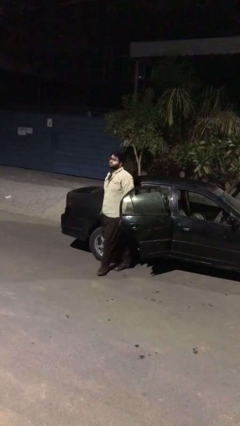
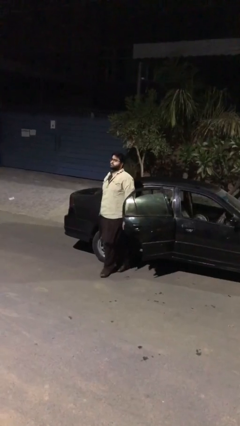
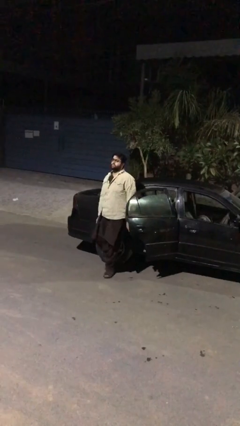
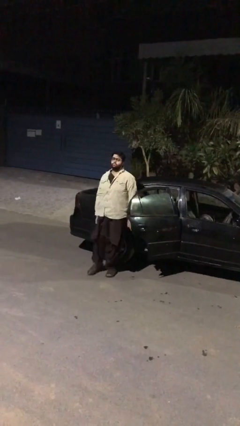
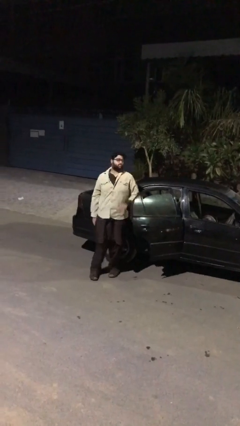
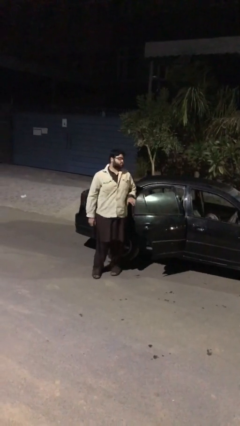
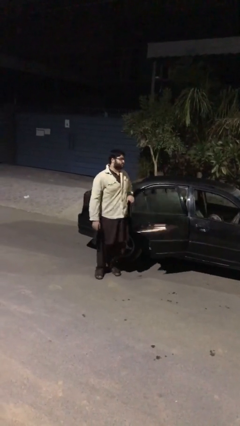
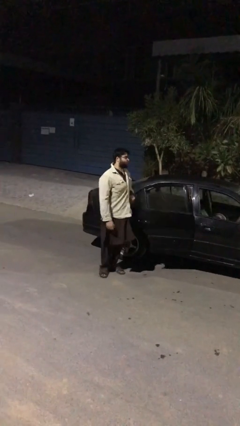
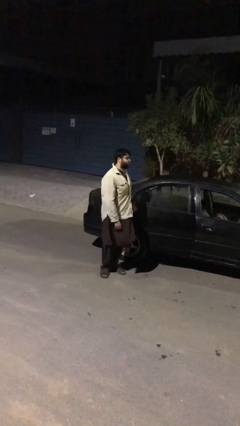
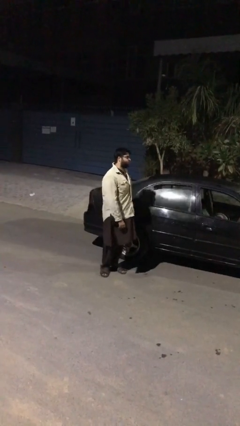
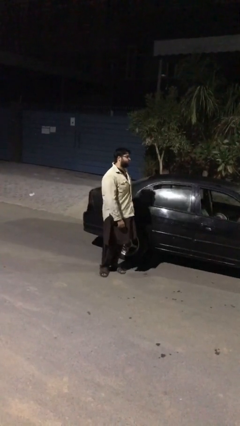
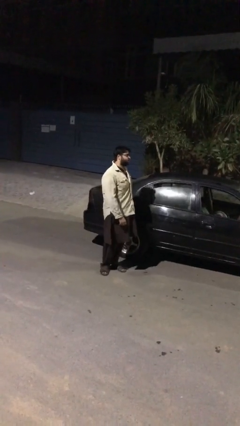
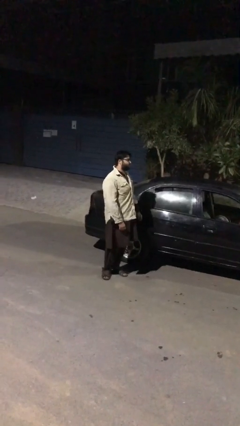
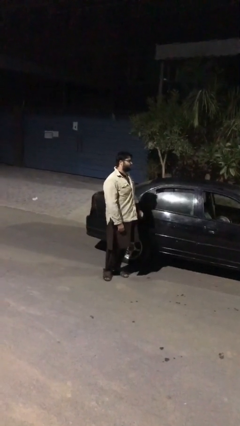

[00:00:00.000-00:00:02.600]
person closes car door

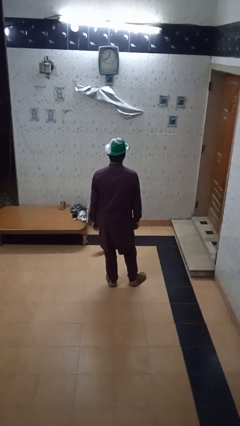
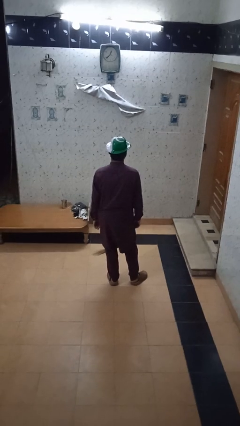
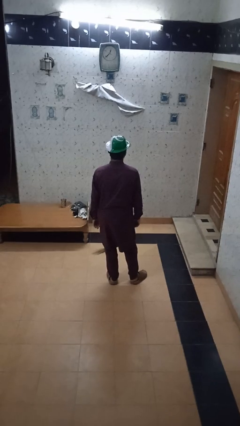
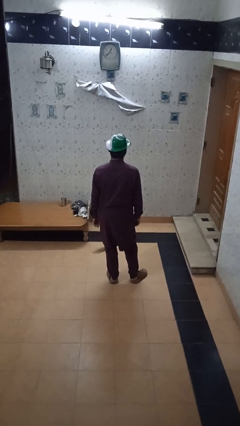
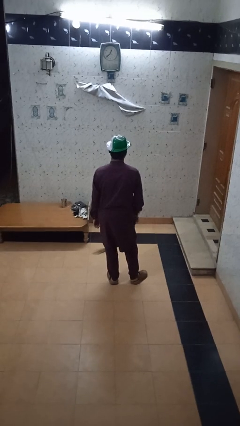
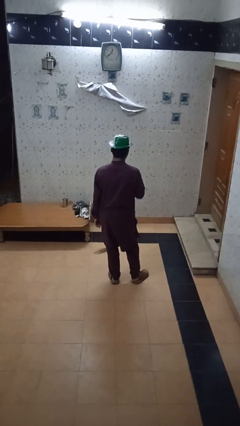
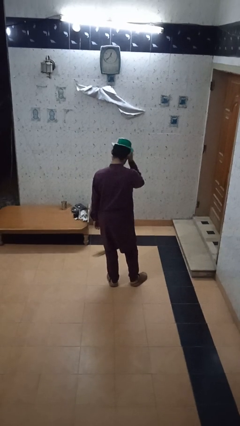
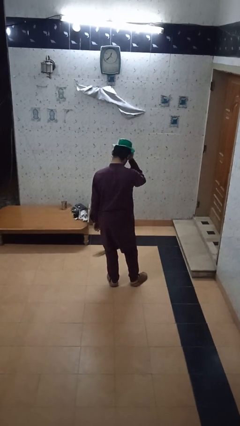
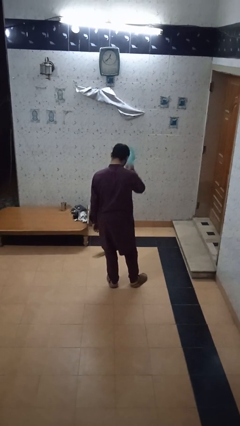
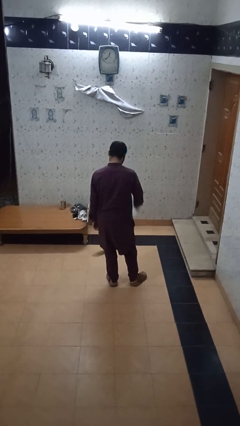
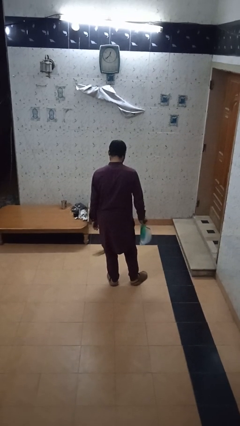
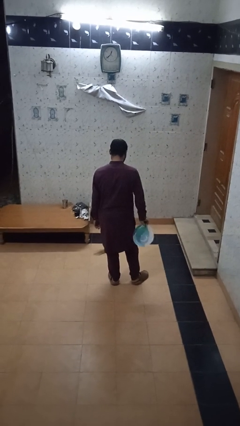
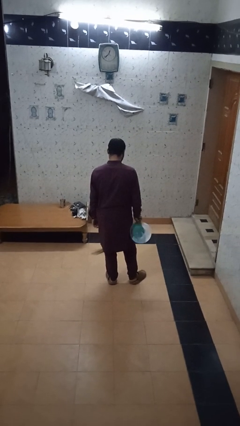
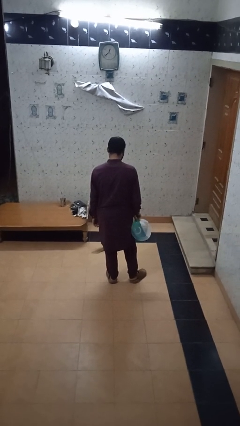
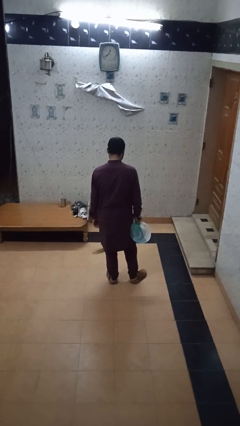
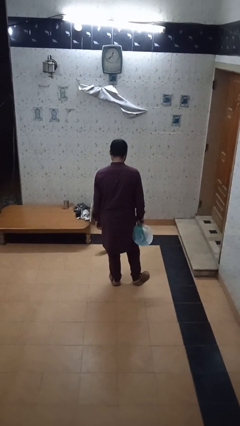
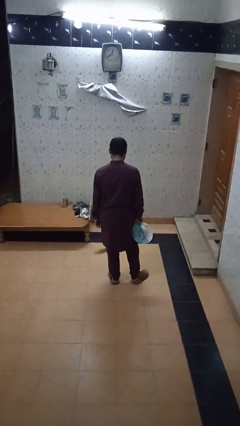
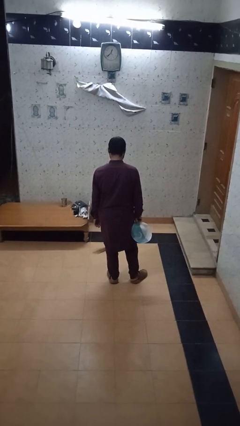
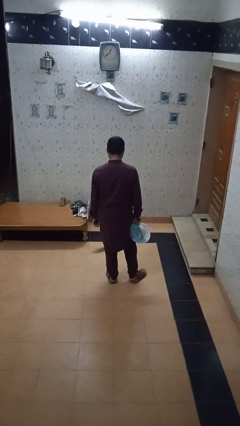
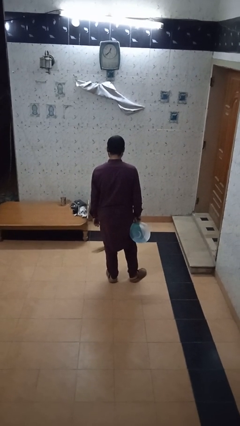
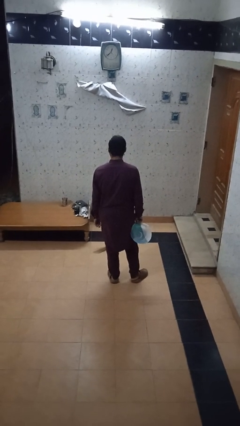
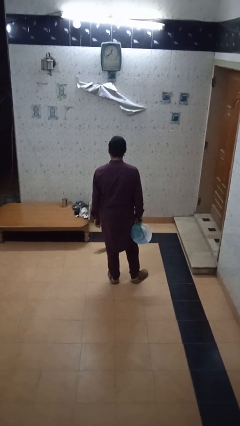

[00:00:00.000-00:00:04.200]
person takes off hat

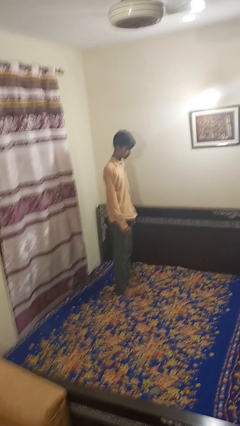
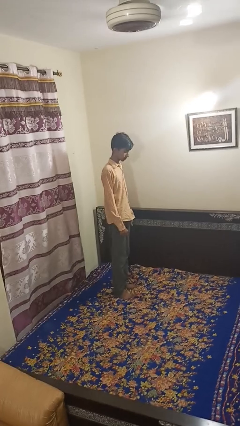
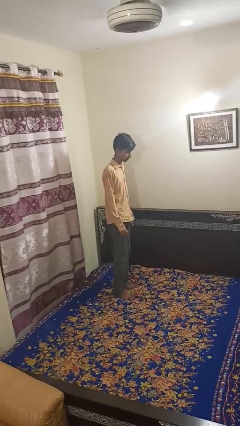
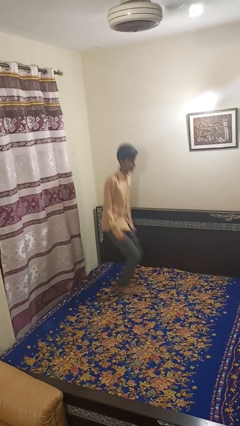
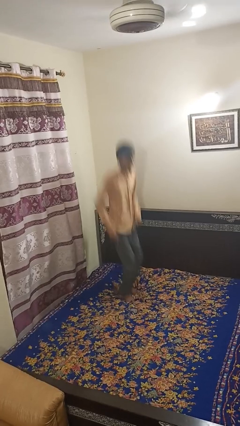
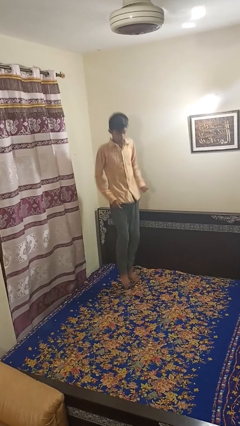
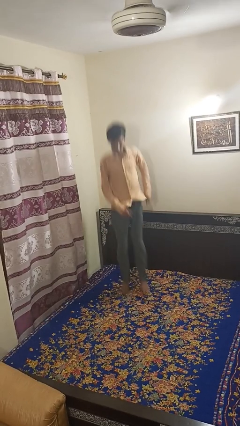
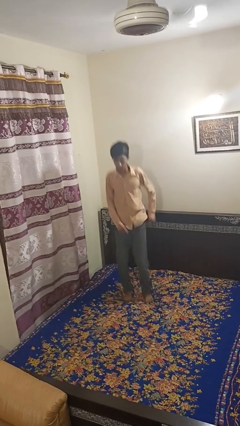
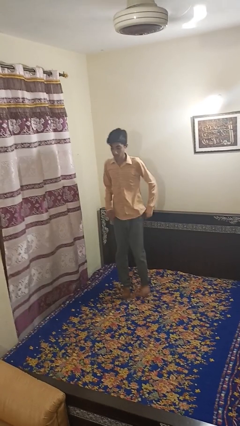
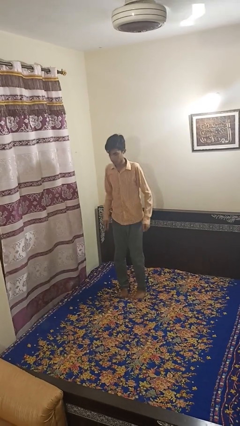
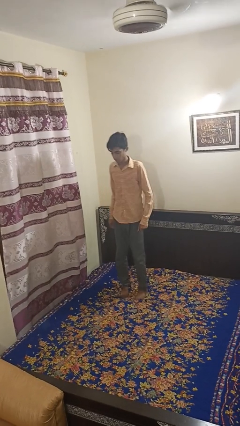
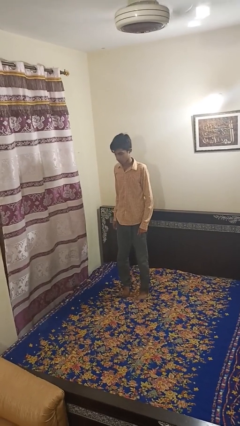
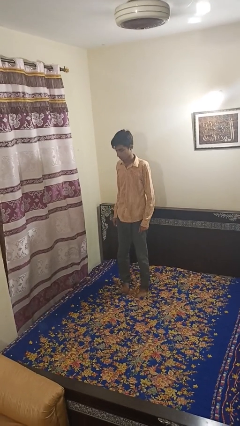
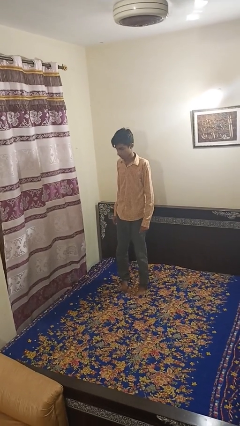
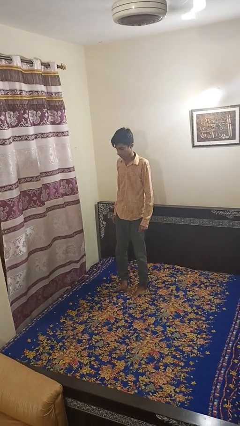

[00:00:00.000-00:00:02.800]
person jumps on bed

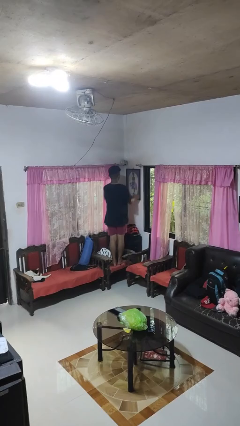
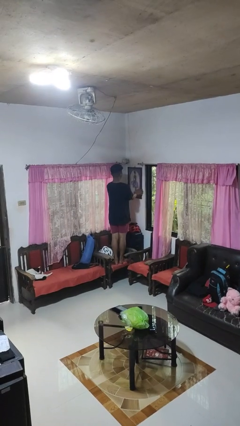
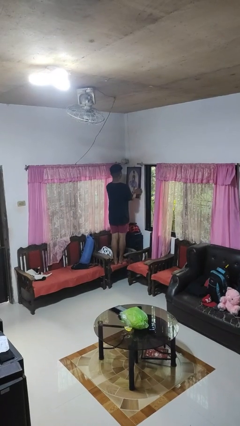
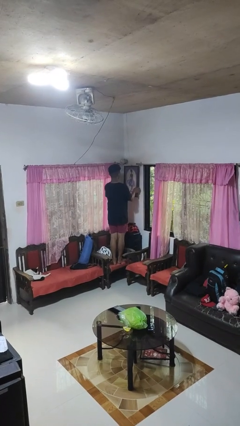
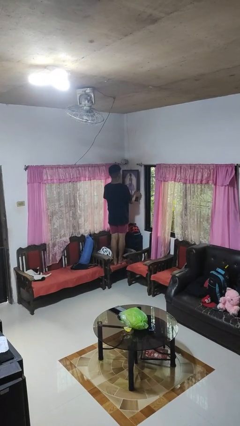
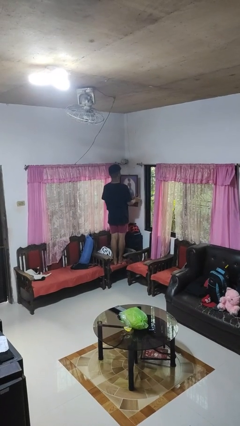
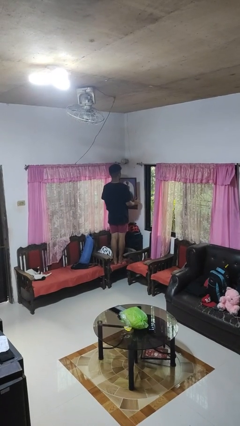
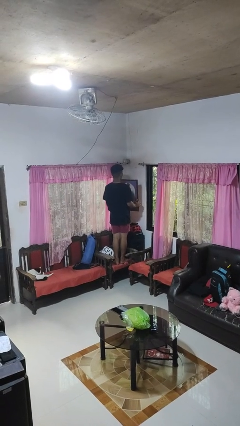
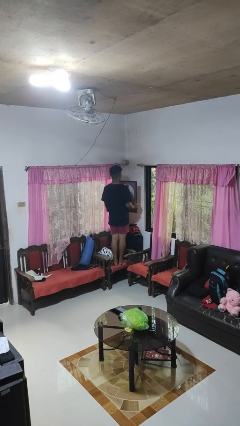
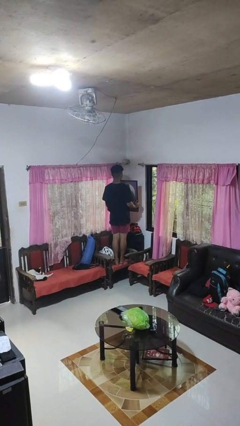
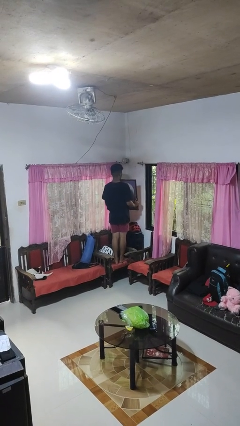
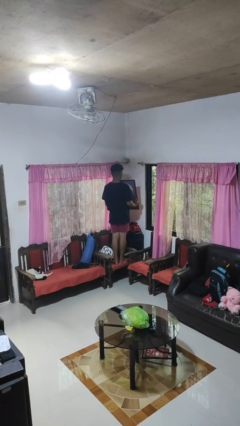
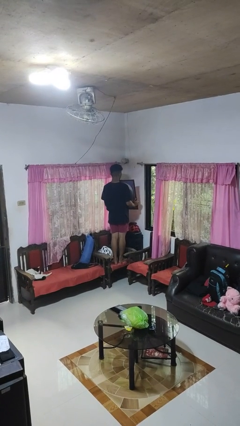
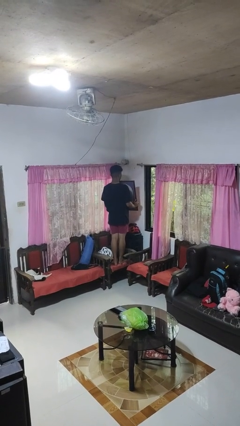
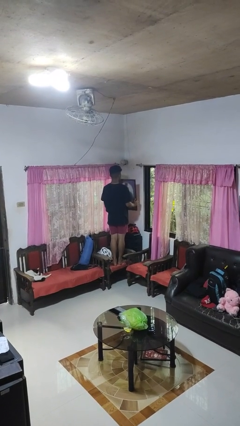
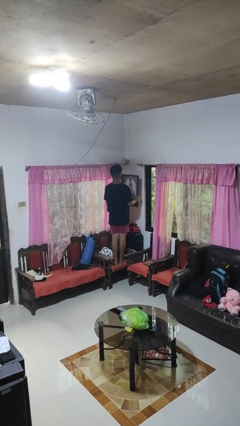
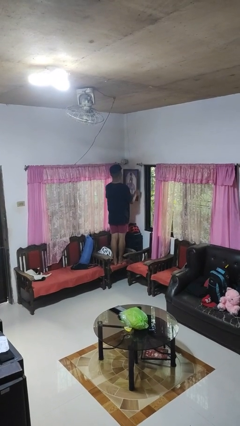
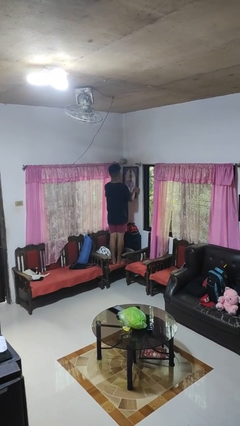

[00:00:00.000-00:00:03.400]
person takes down picture frame

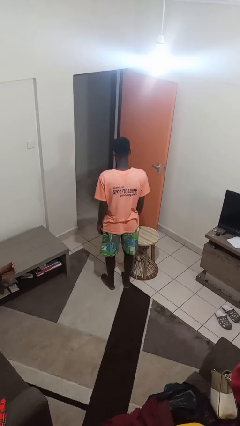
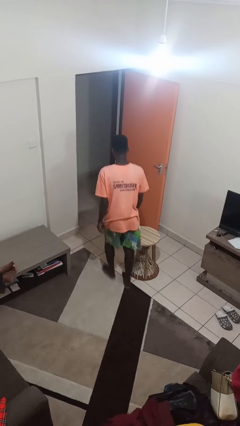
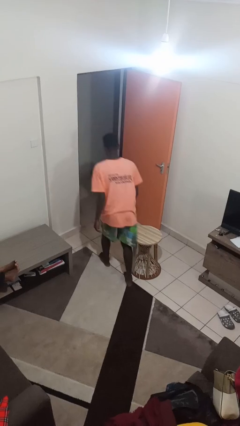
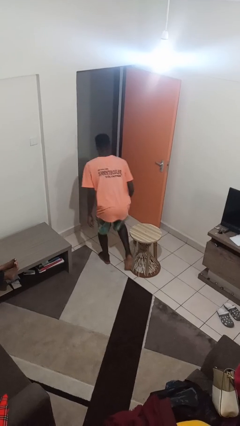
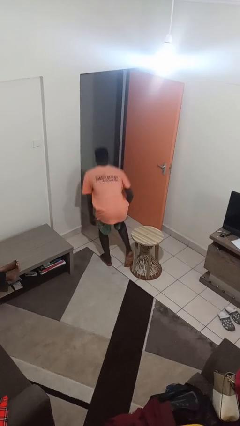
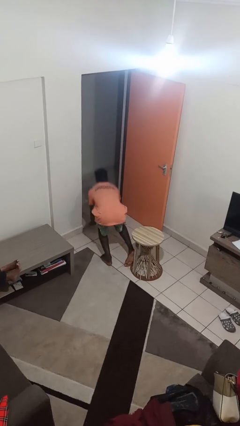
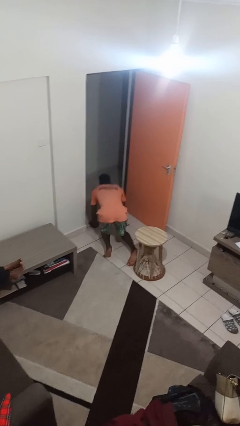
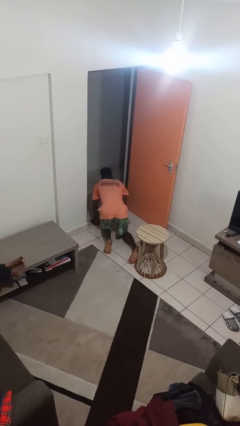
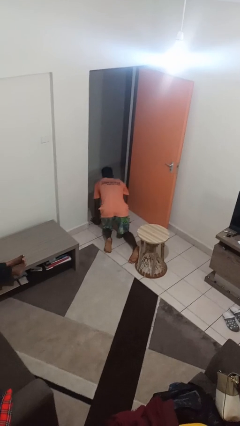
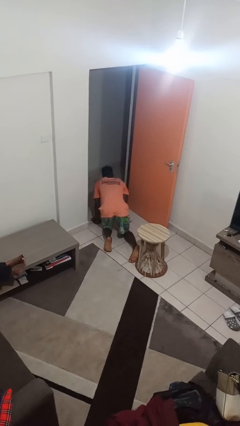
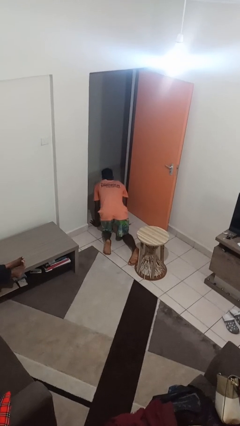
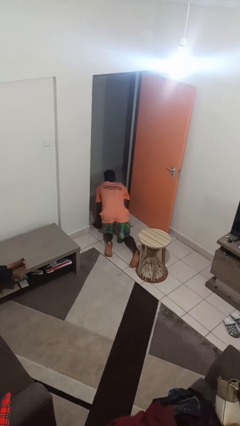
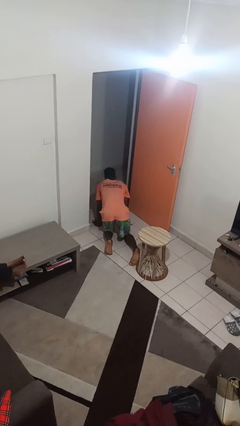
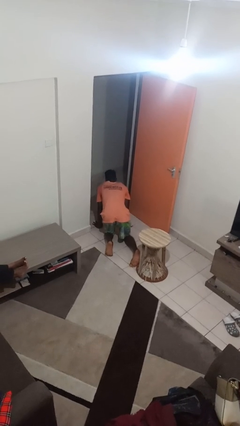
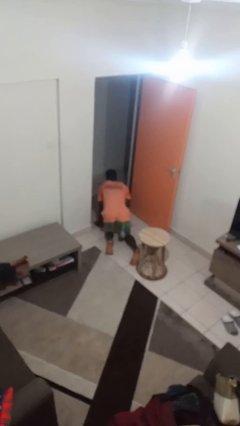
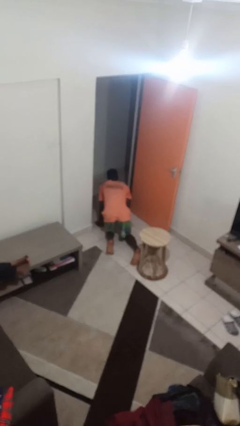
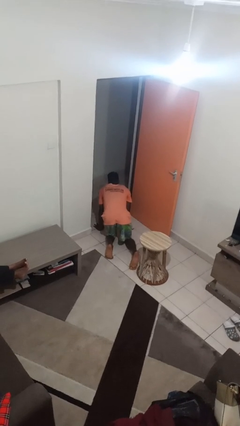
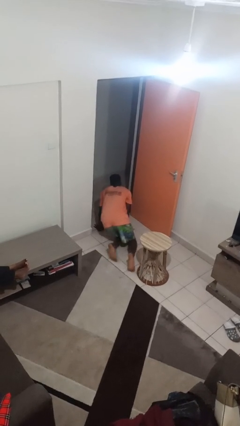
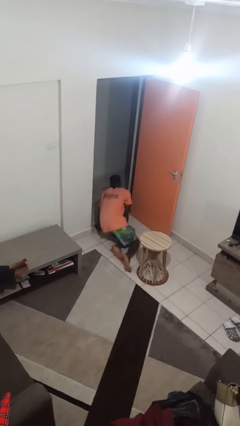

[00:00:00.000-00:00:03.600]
person trips on object on floor

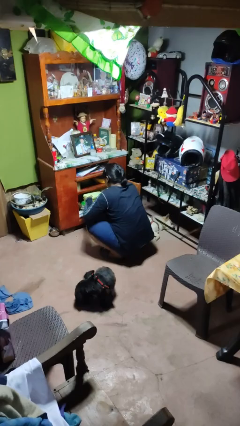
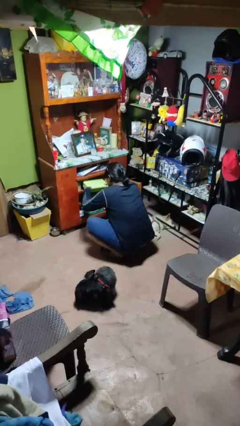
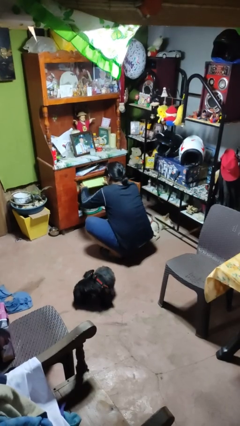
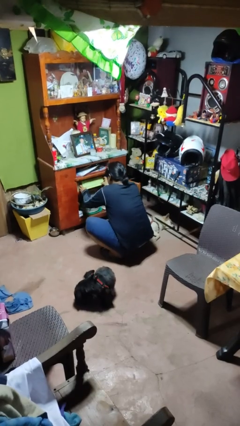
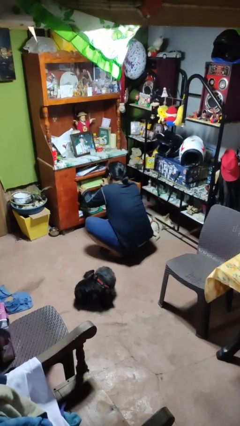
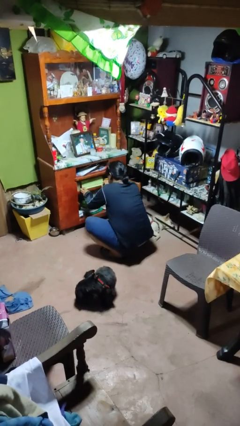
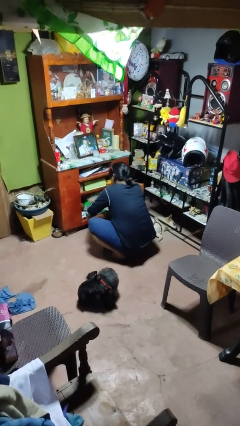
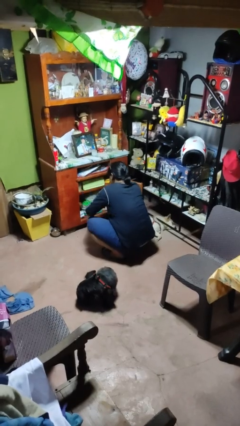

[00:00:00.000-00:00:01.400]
person puts down object into cabinet
